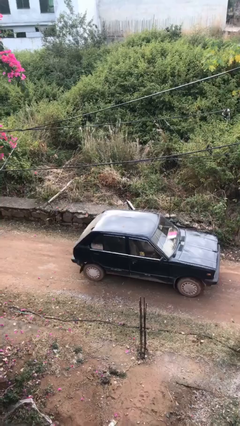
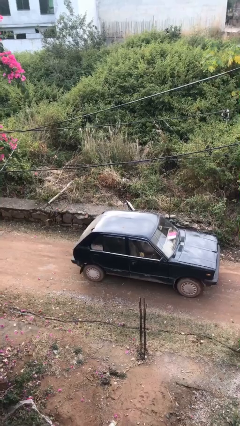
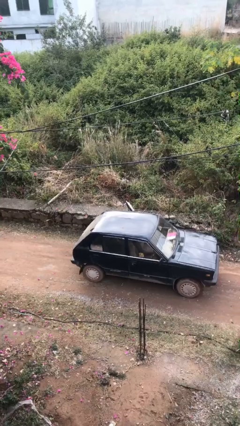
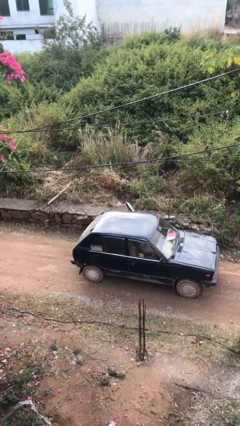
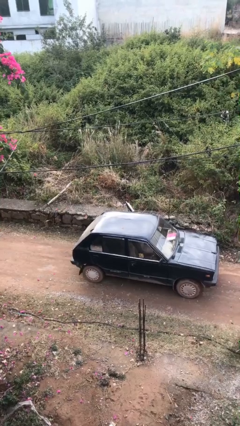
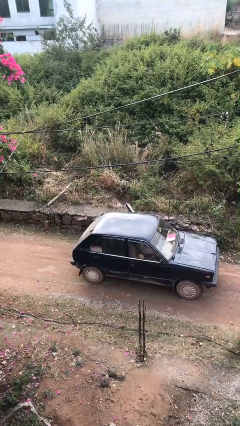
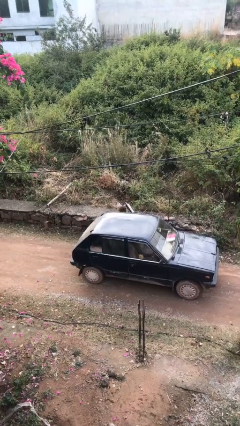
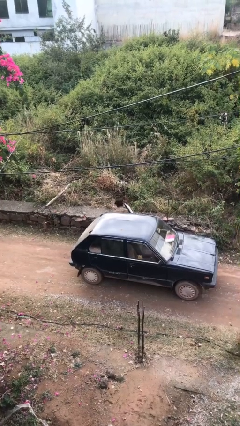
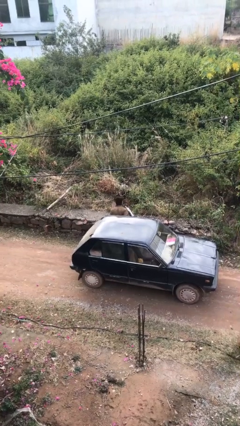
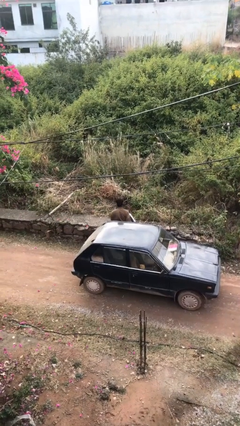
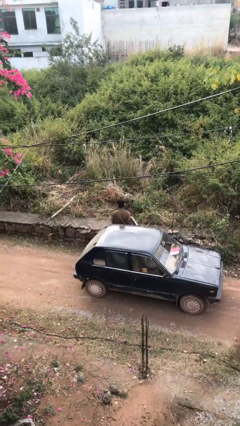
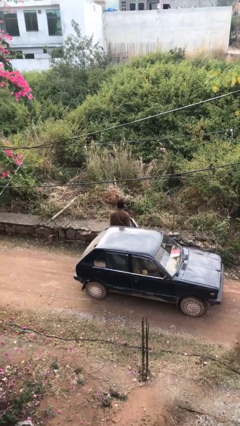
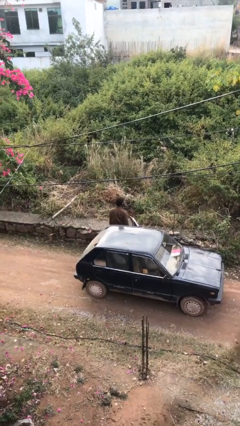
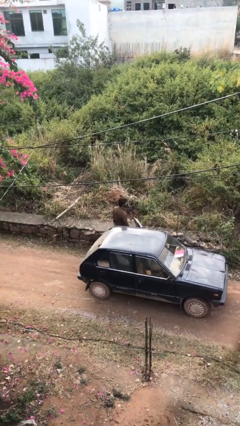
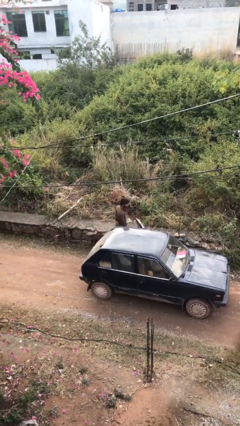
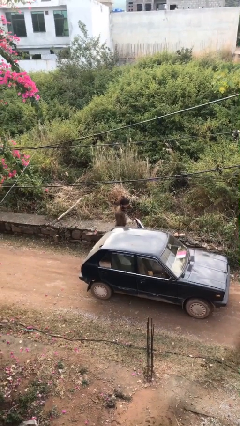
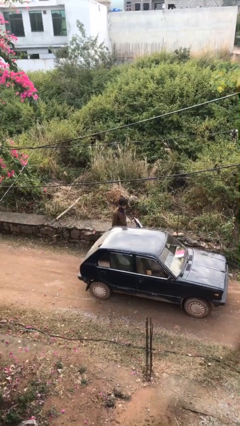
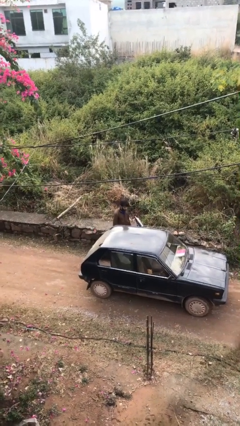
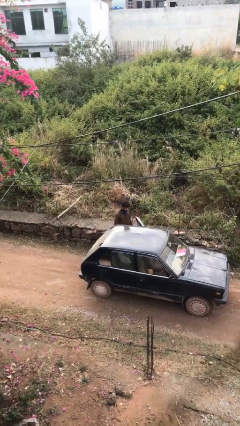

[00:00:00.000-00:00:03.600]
person exits car

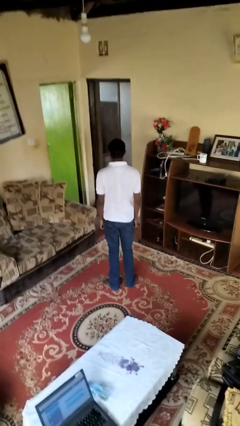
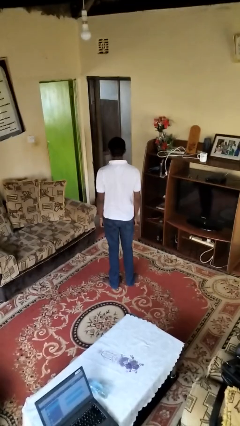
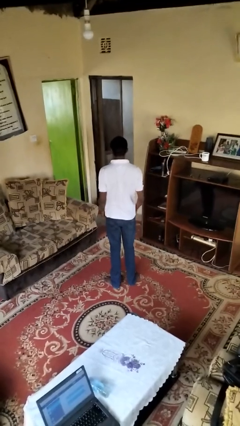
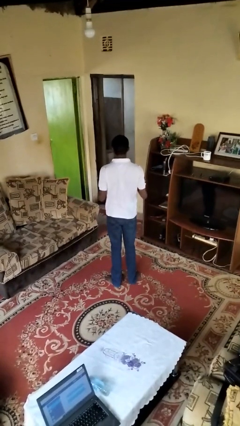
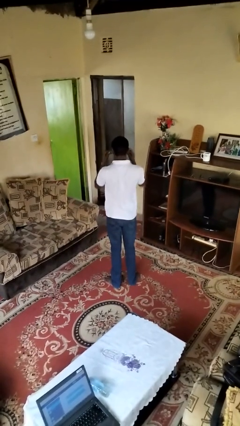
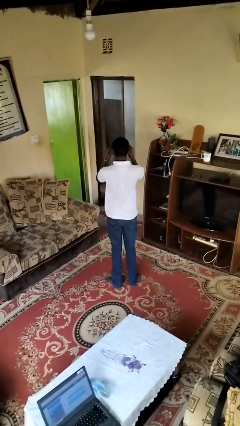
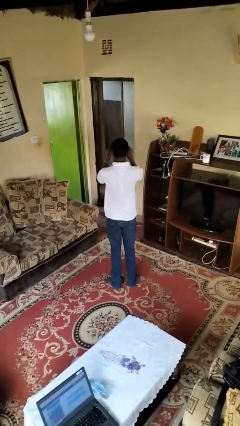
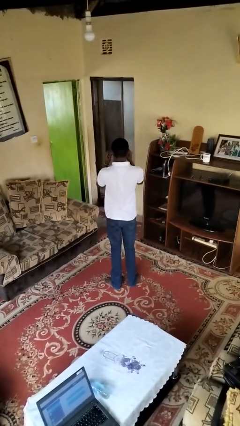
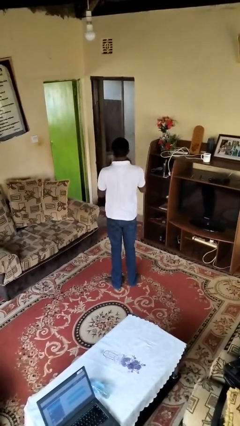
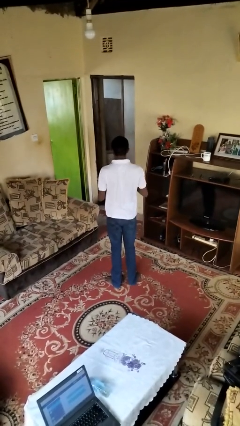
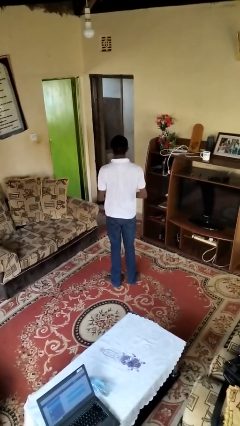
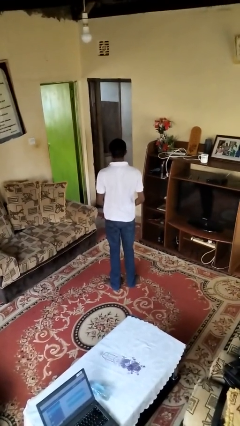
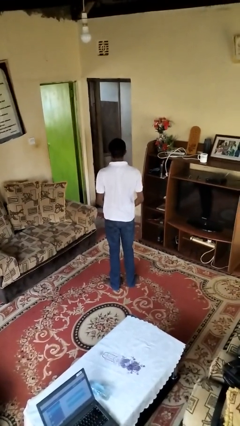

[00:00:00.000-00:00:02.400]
person takes off sunglasses

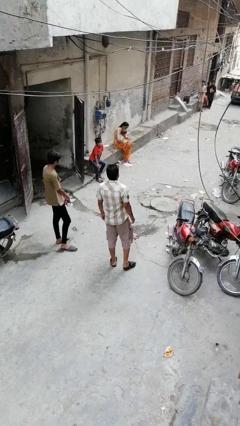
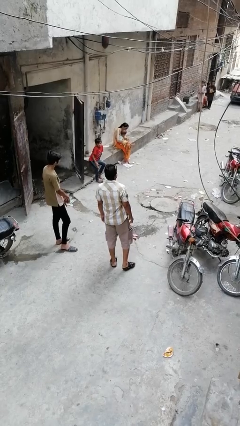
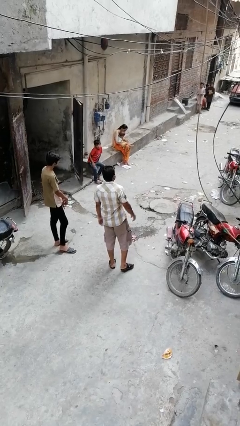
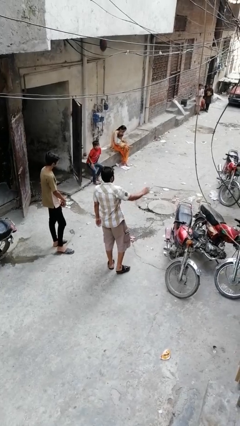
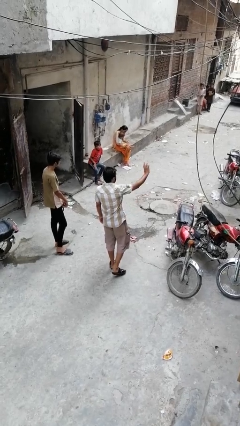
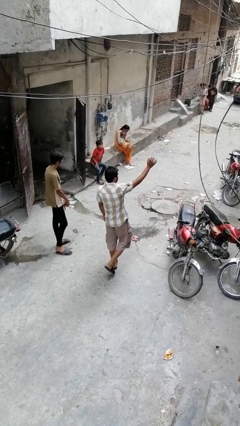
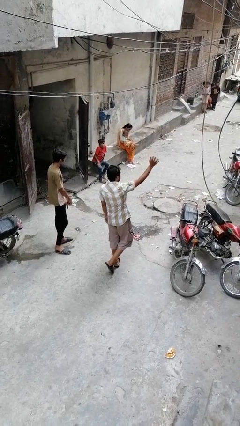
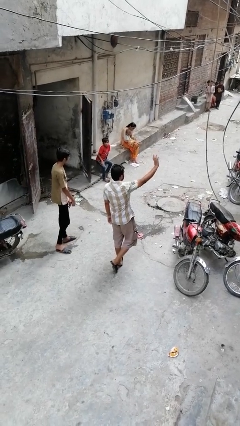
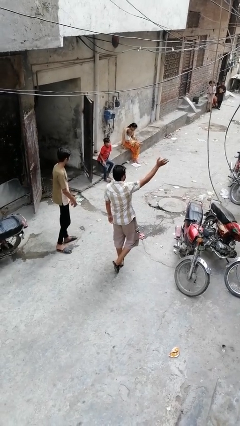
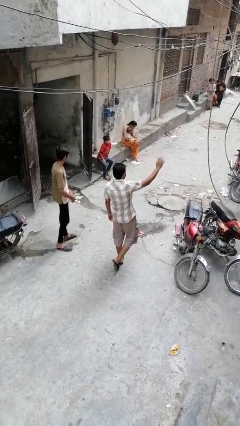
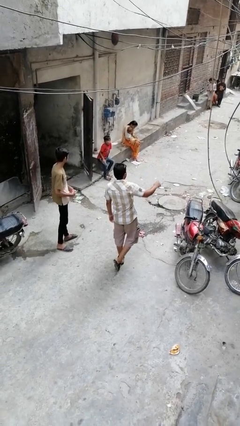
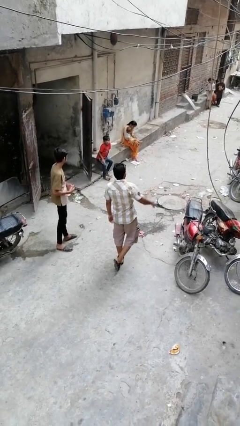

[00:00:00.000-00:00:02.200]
person waves at person

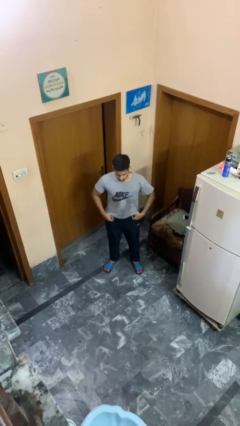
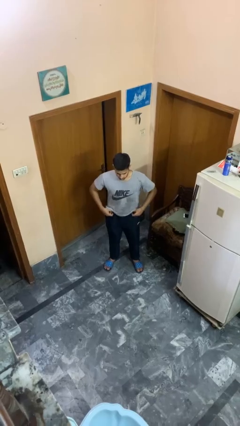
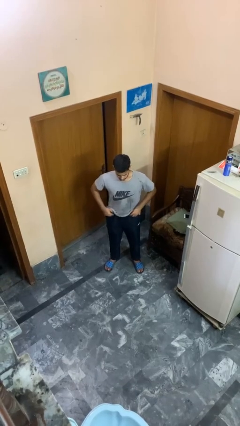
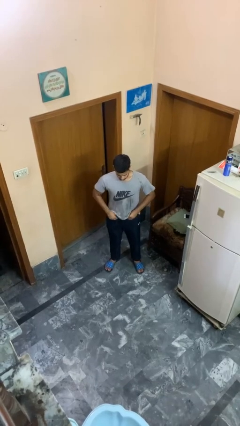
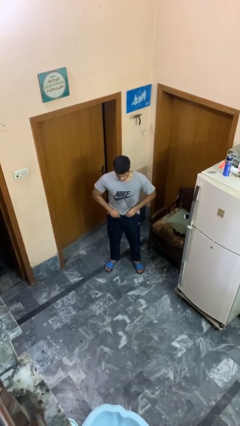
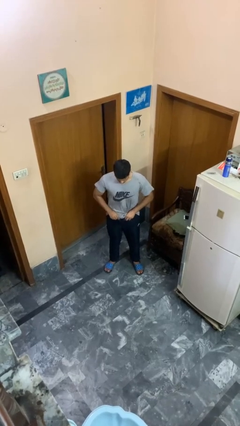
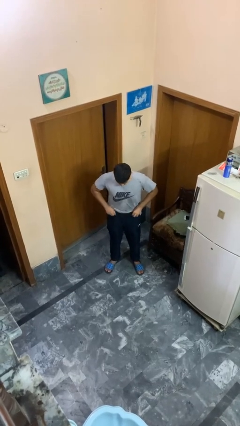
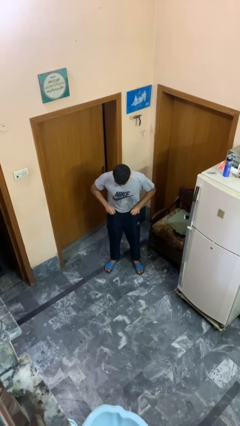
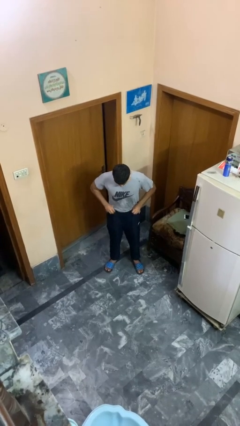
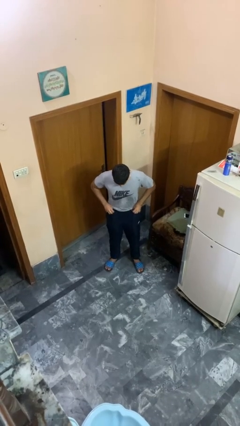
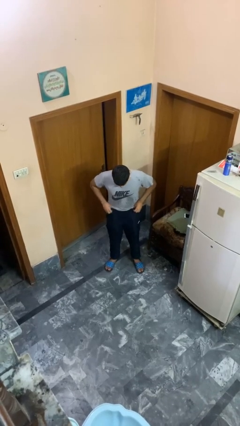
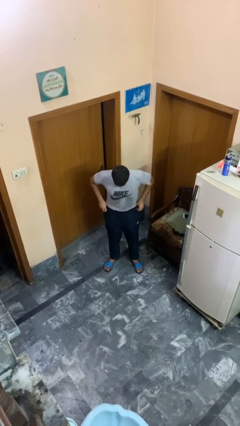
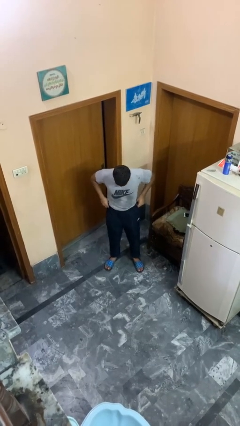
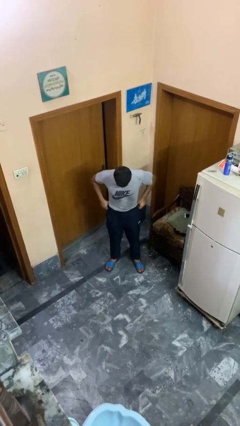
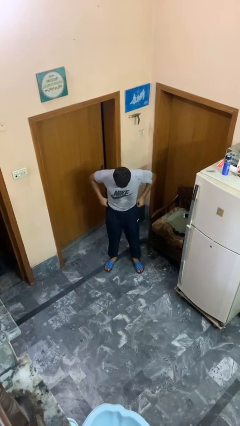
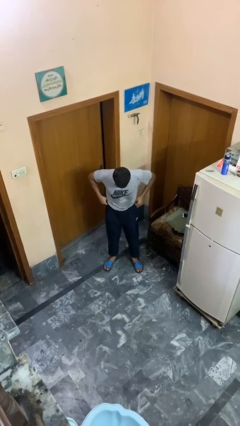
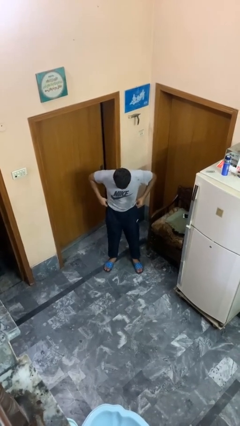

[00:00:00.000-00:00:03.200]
person hikes up pants

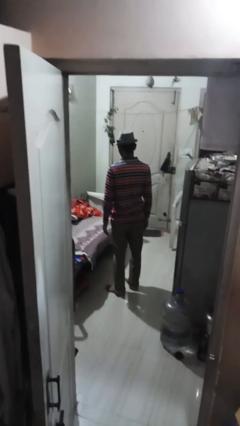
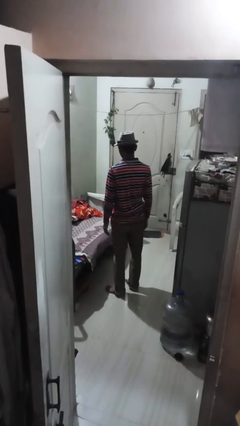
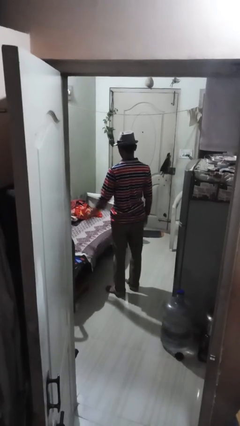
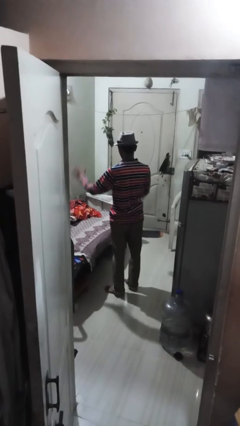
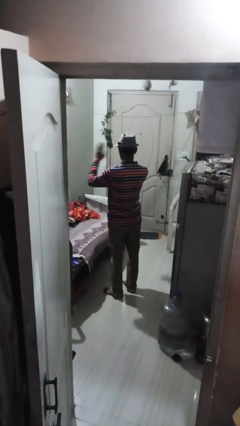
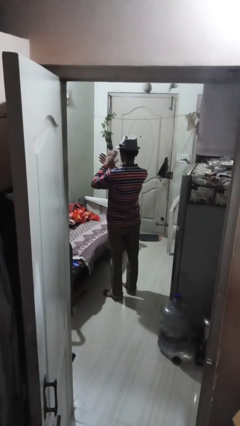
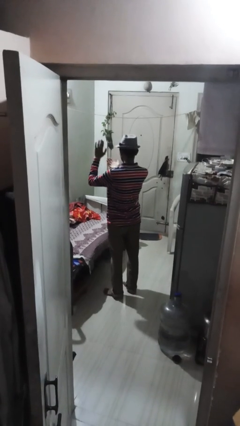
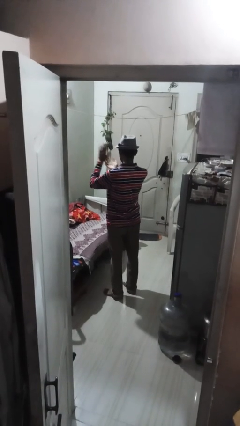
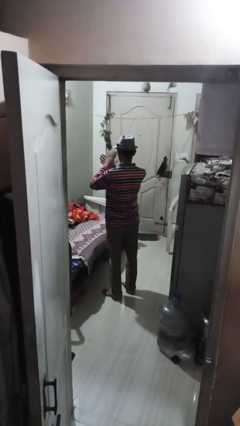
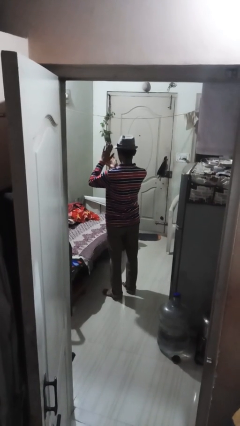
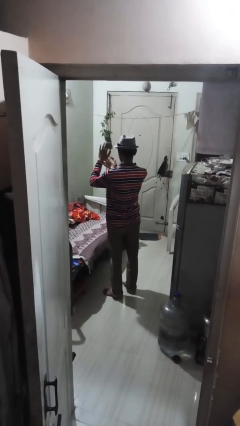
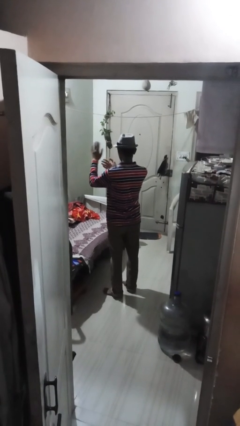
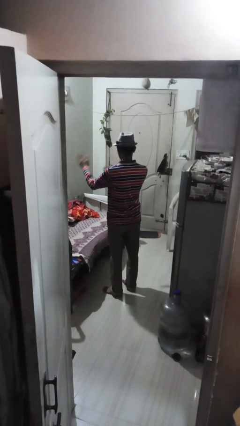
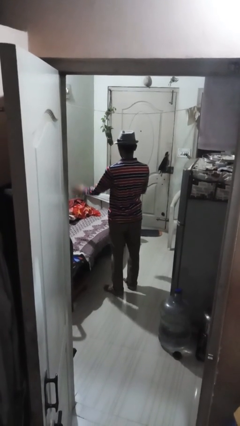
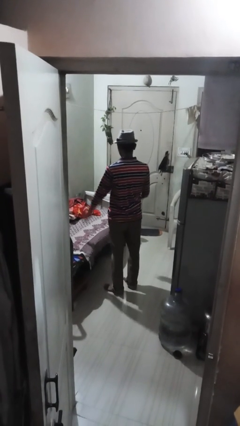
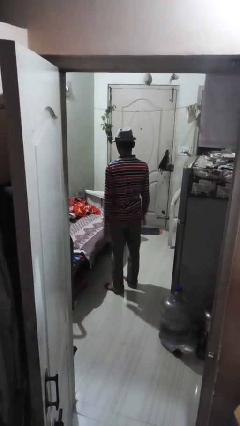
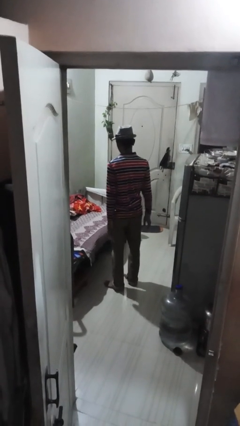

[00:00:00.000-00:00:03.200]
person claps hands

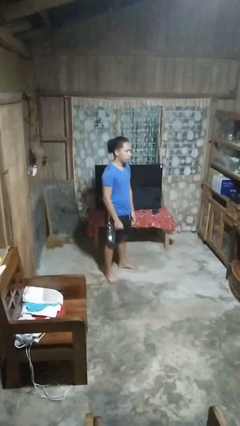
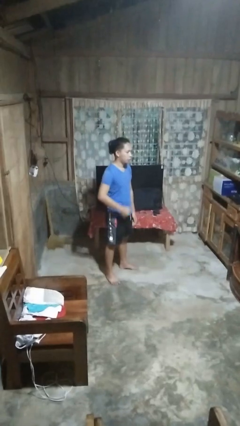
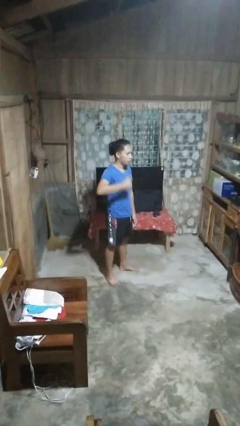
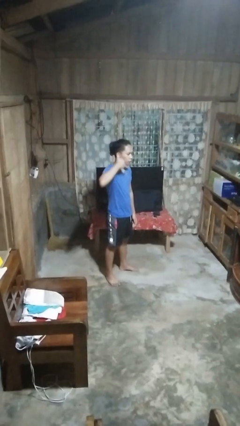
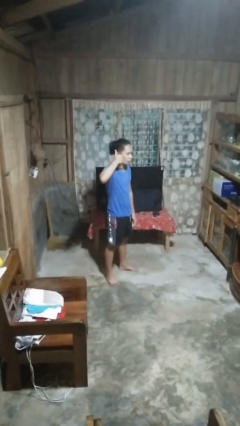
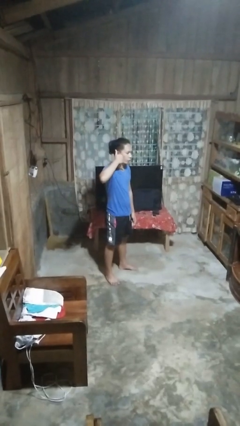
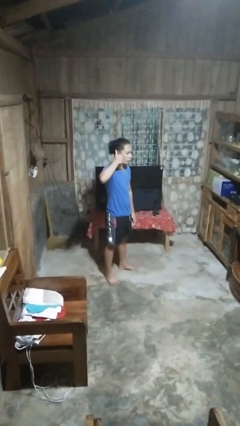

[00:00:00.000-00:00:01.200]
person gestures call me

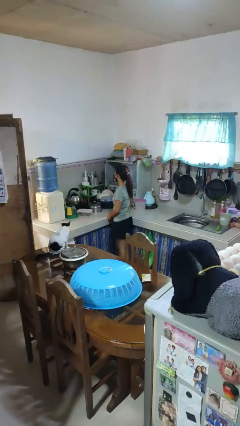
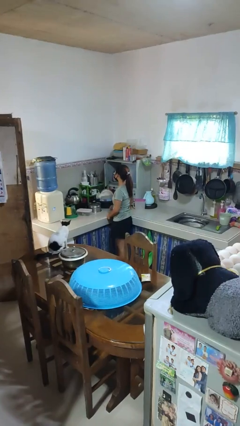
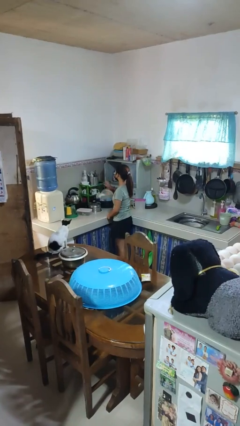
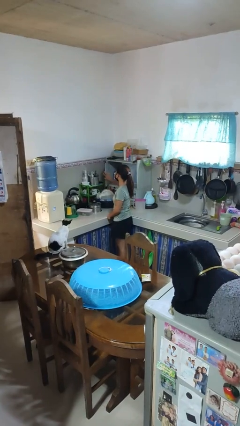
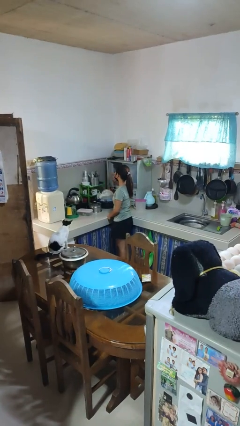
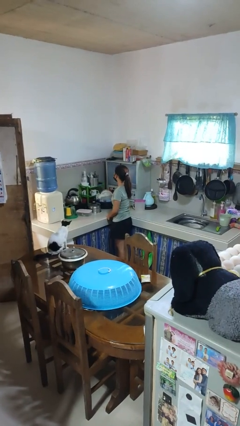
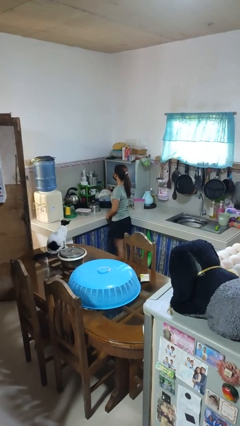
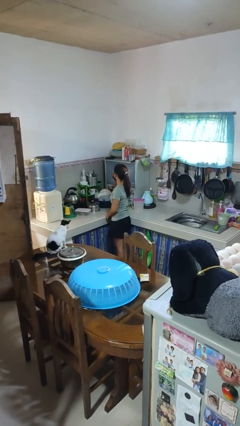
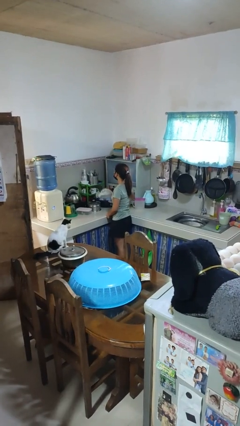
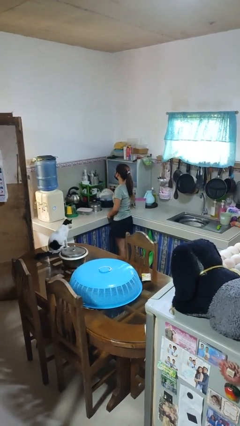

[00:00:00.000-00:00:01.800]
person closes kitchen drawer
